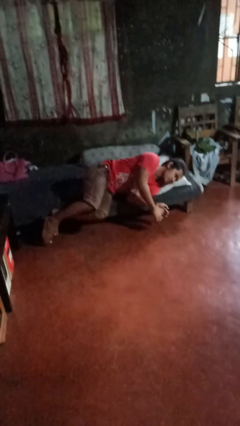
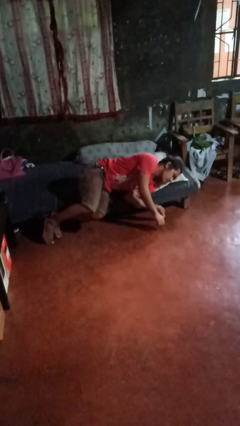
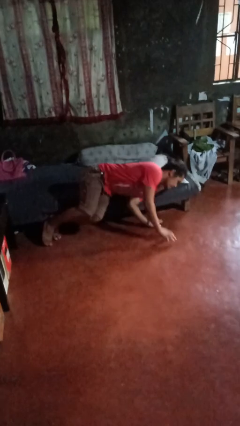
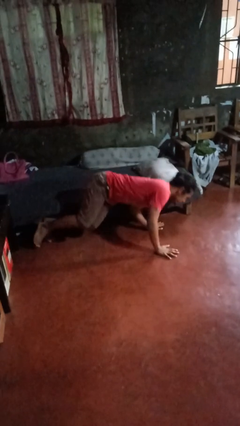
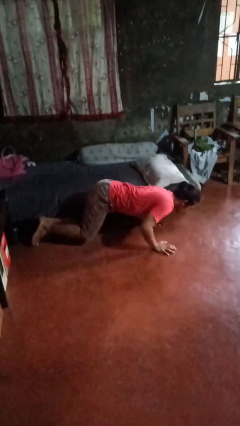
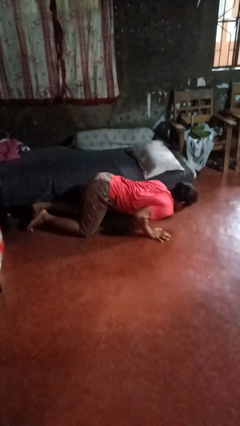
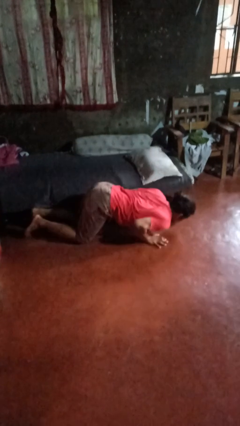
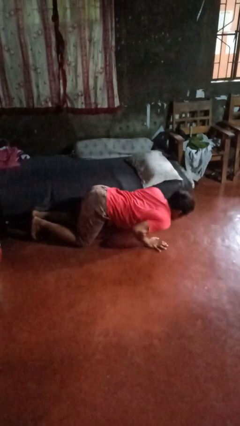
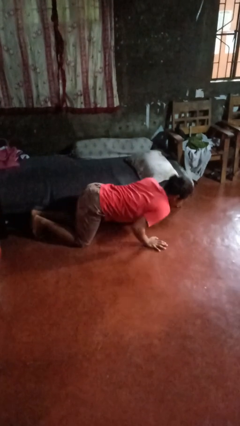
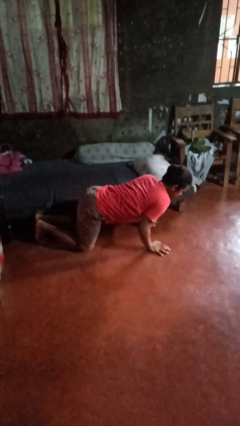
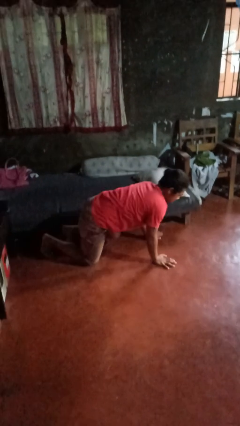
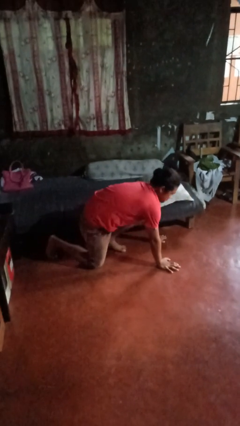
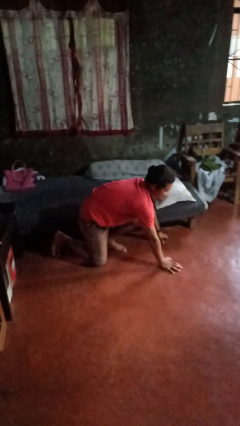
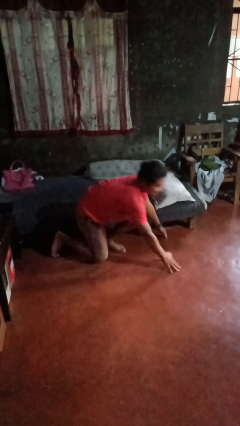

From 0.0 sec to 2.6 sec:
person falls from bed

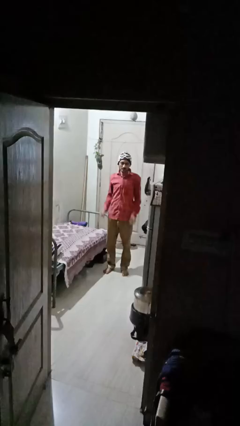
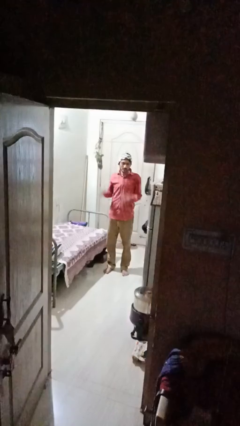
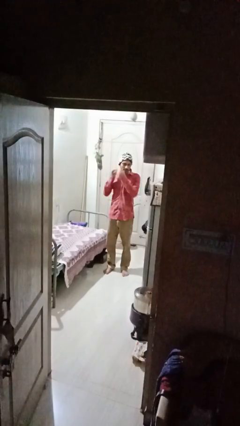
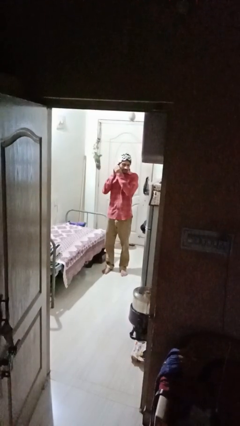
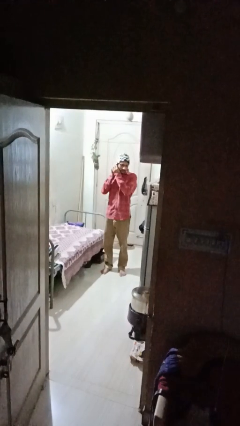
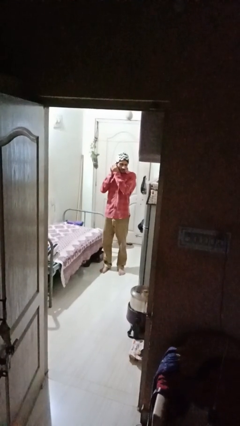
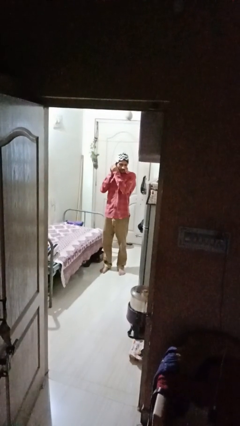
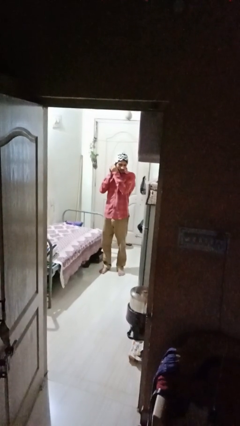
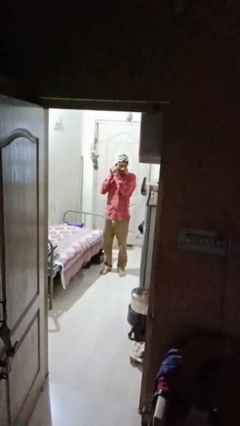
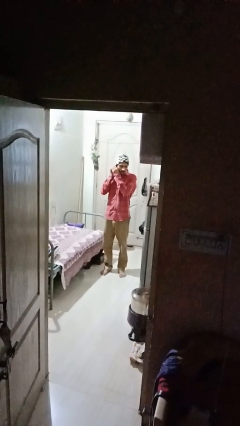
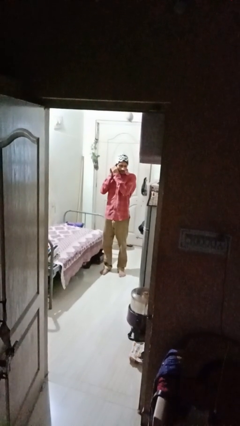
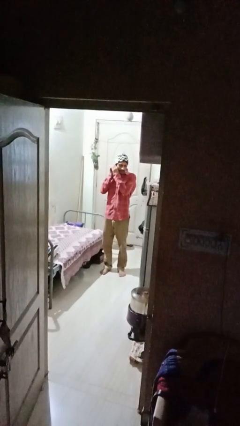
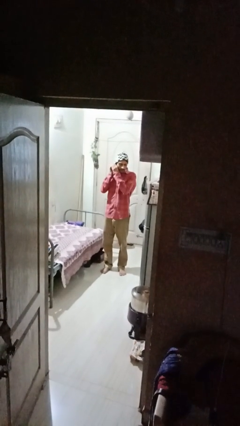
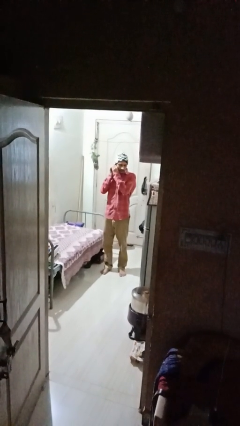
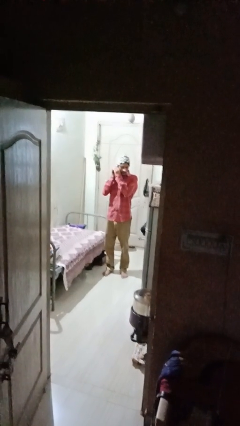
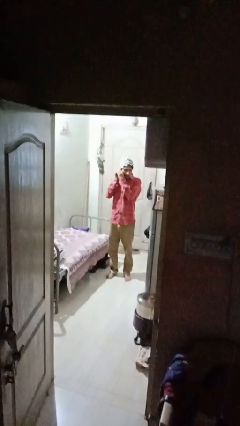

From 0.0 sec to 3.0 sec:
person puts on earrings

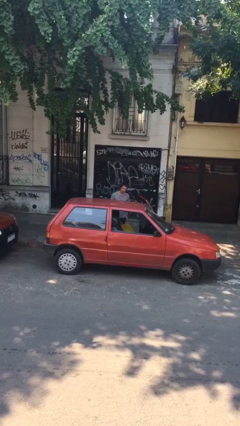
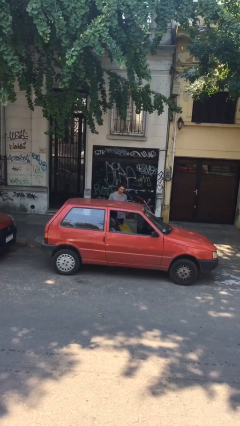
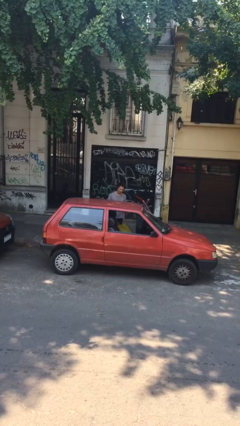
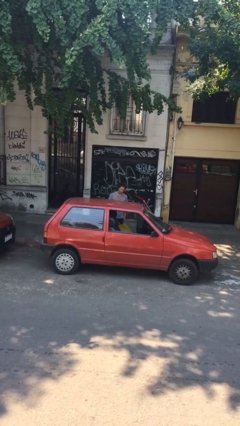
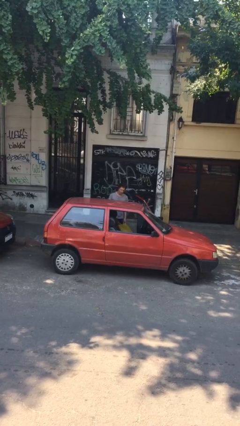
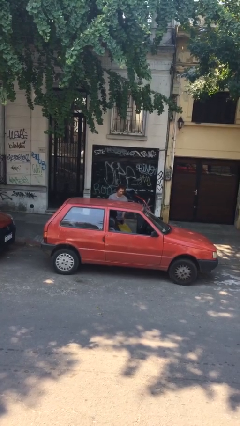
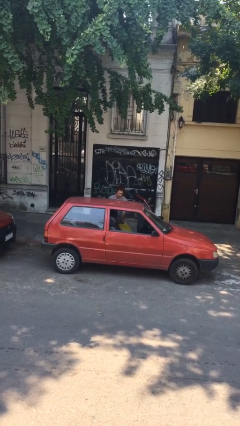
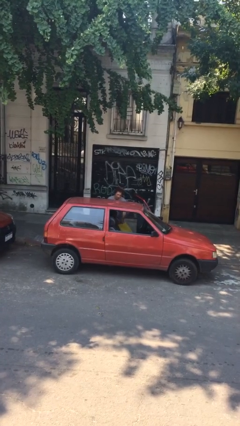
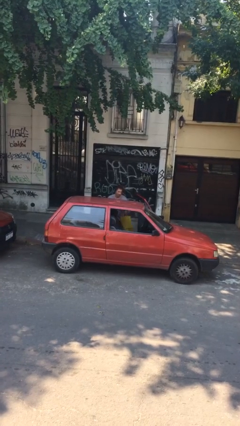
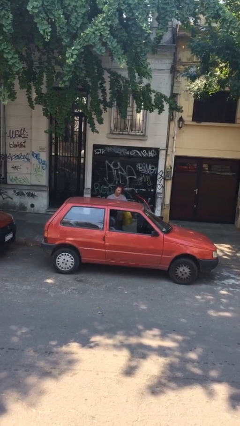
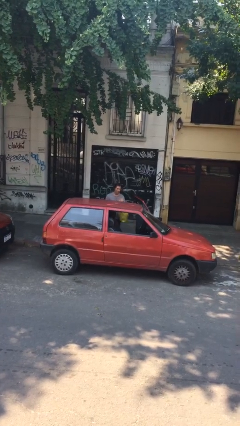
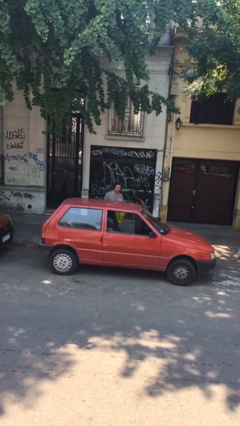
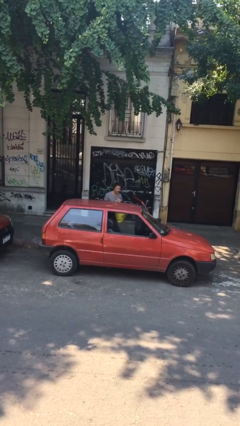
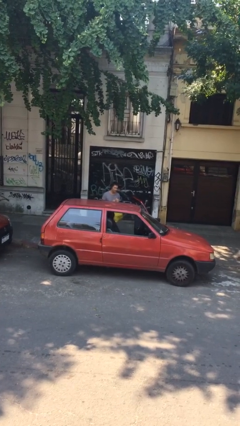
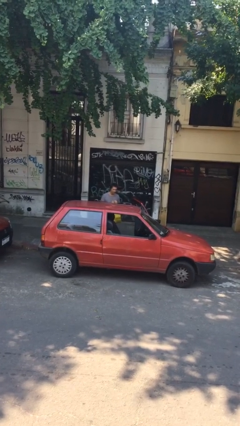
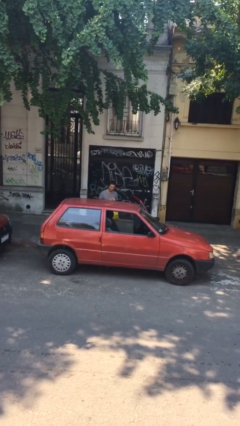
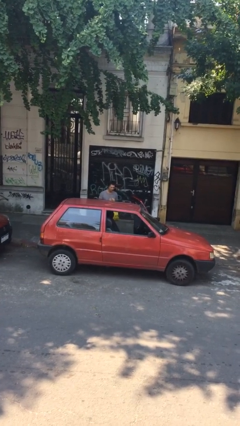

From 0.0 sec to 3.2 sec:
person unloads car

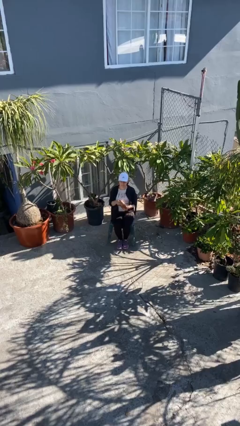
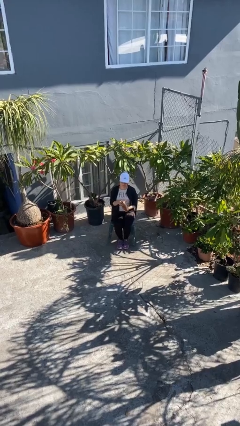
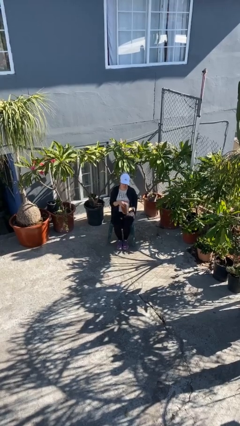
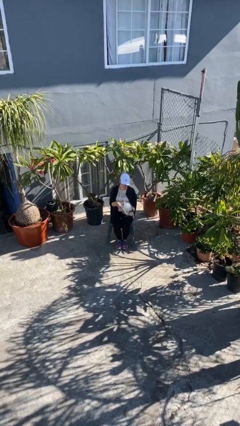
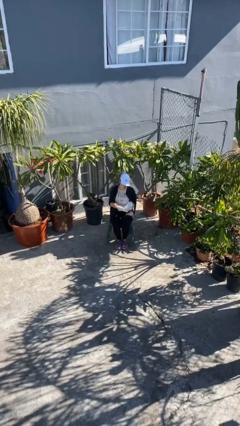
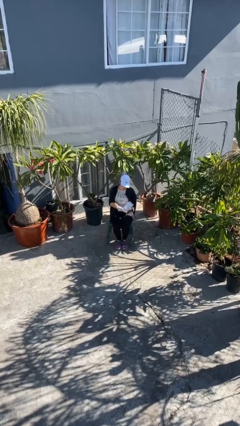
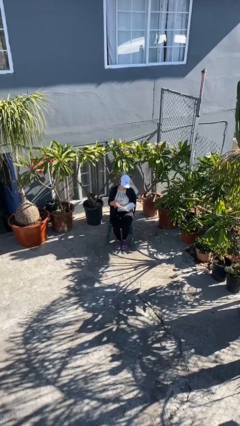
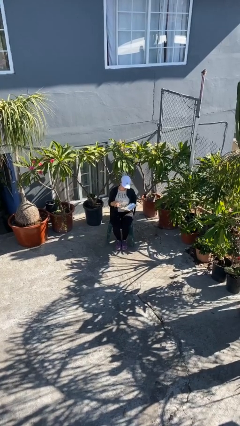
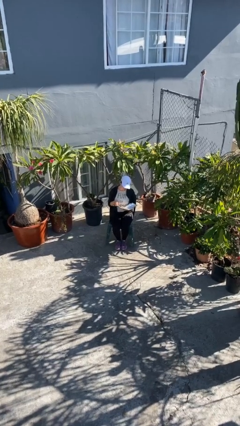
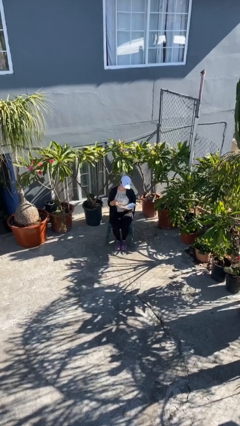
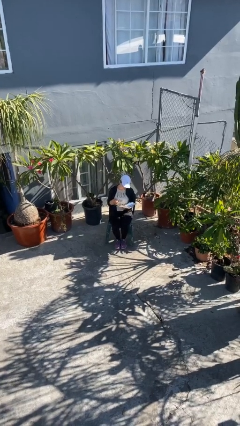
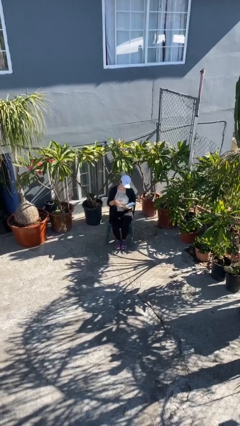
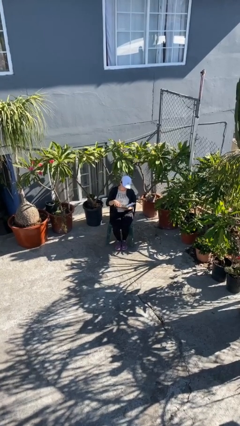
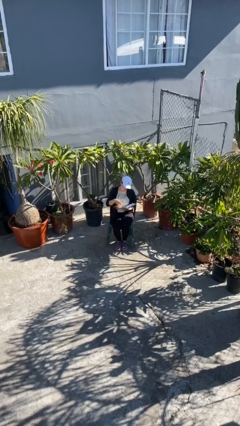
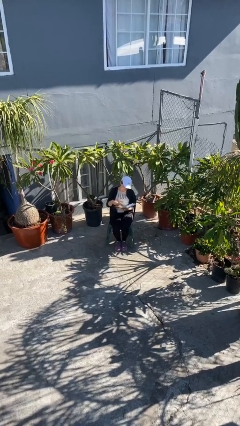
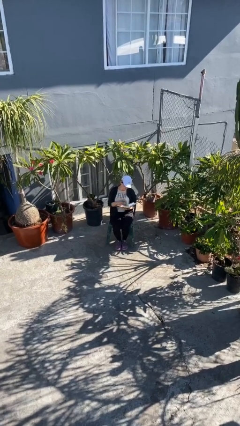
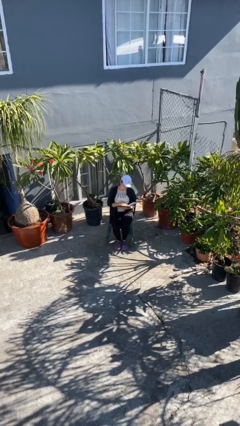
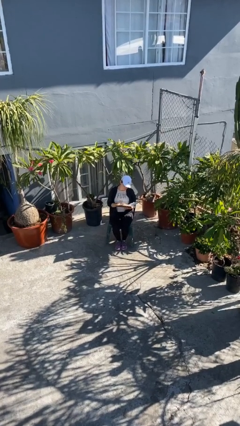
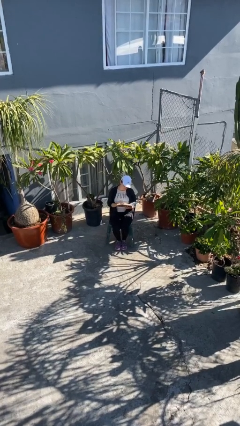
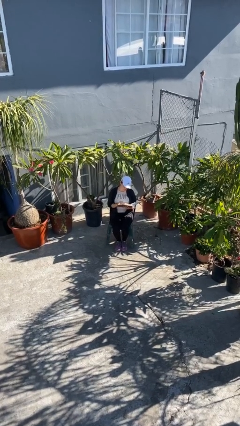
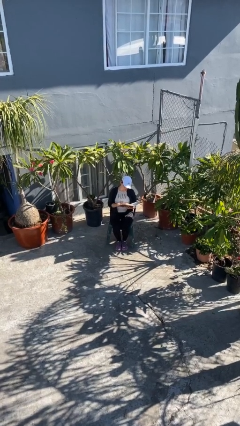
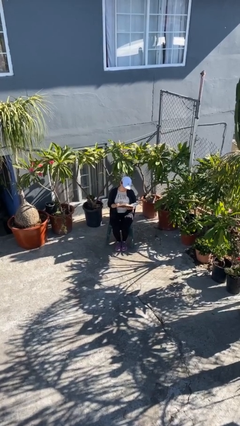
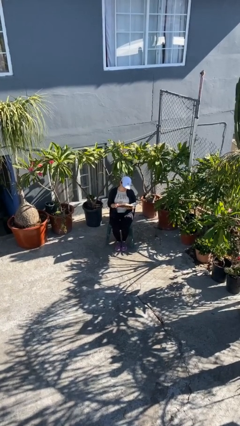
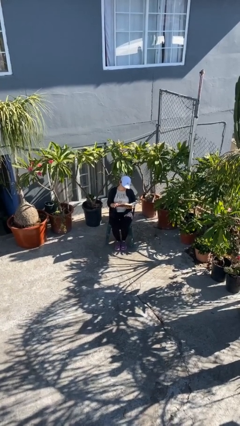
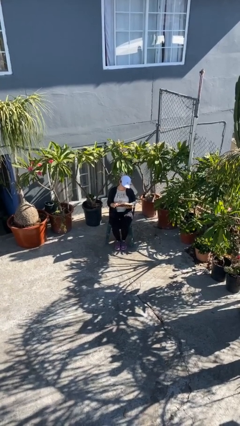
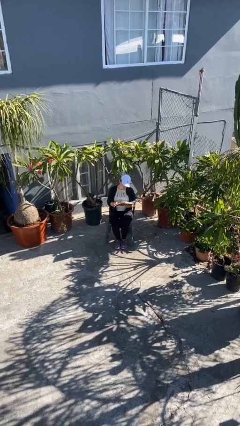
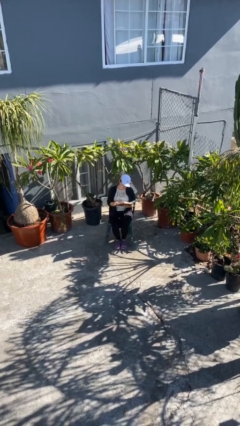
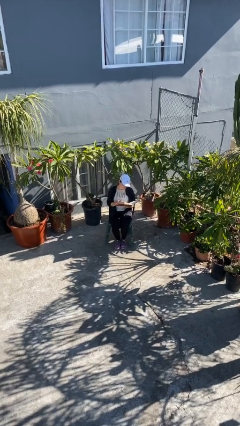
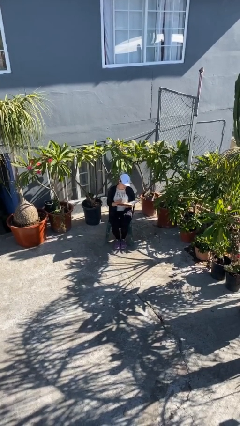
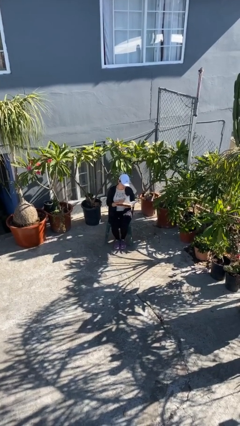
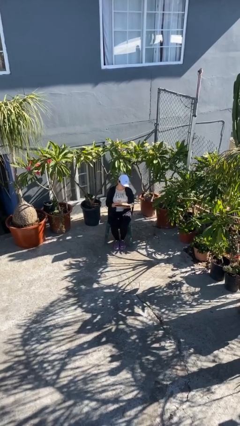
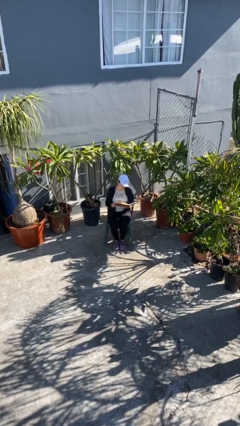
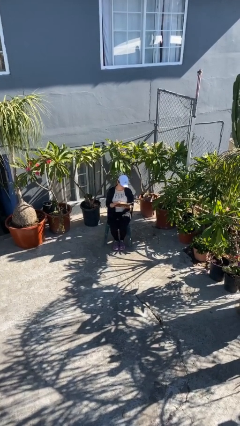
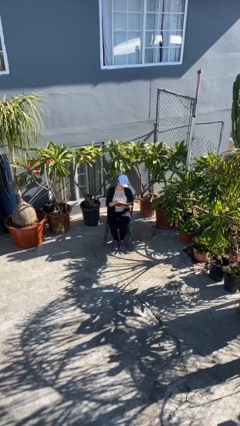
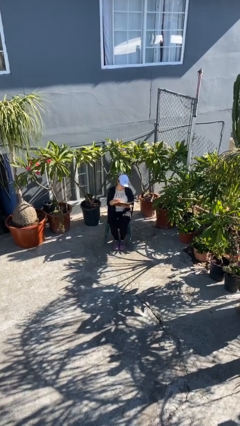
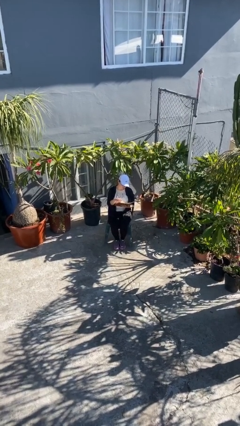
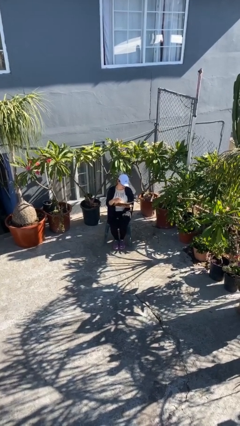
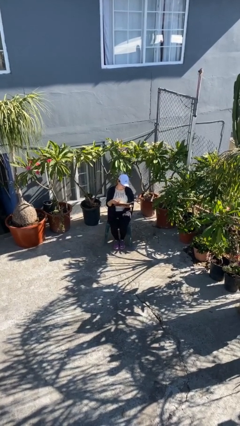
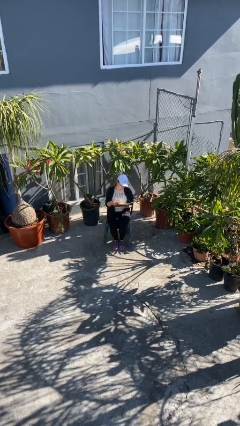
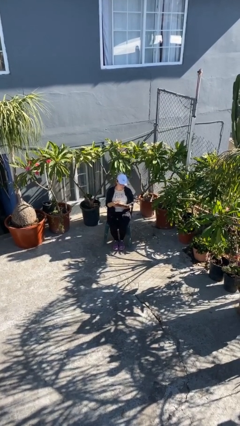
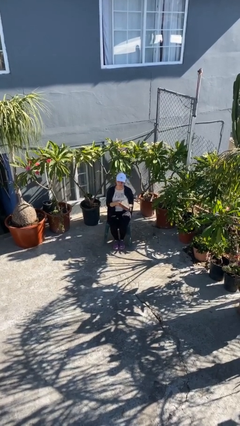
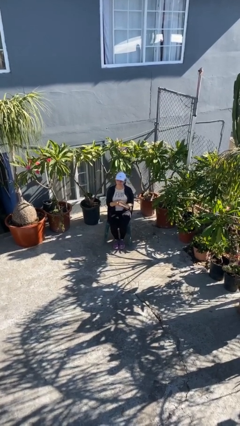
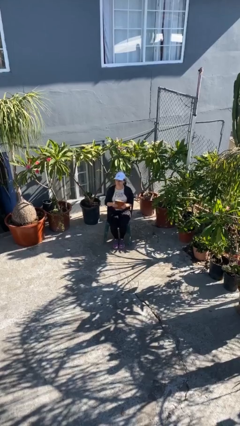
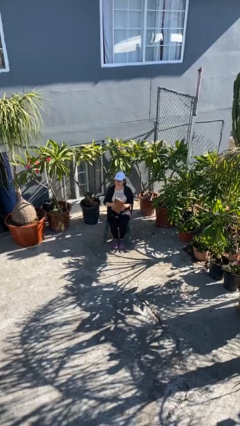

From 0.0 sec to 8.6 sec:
person reads document
